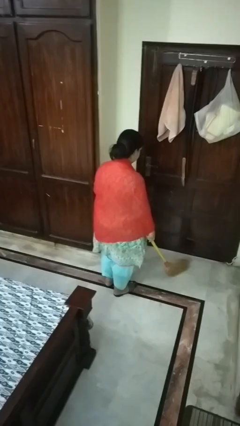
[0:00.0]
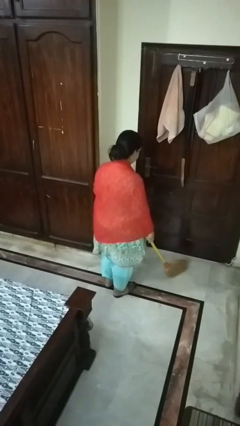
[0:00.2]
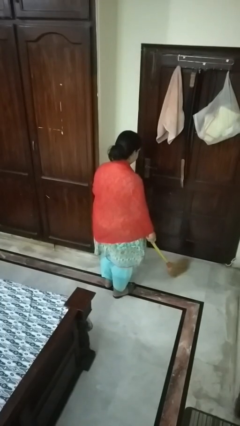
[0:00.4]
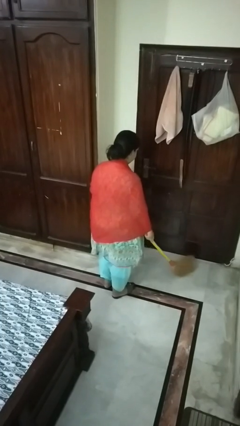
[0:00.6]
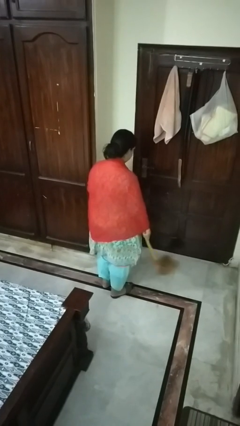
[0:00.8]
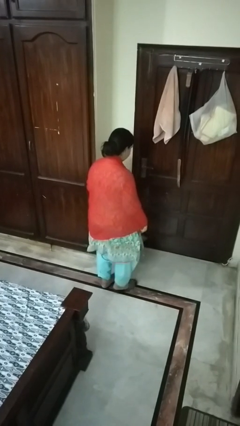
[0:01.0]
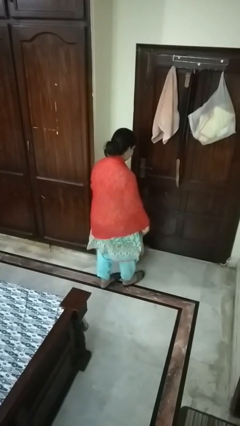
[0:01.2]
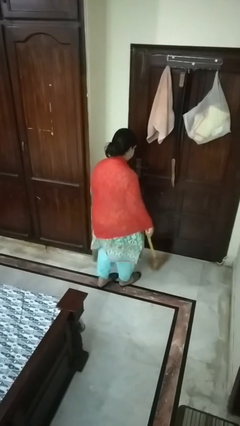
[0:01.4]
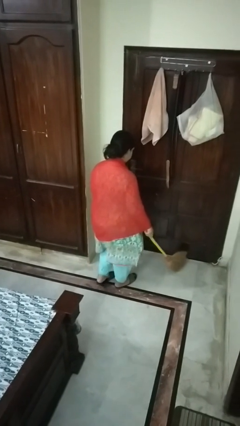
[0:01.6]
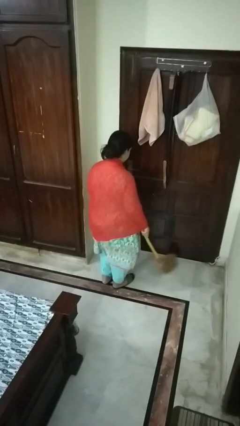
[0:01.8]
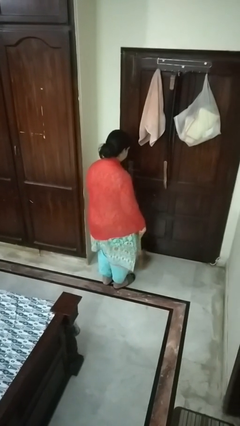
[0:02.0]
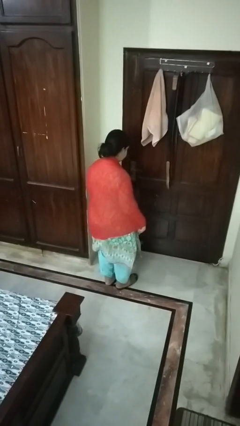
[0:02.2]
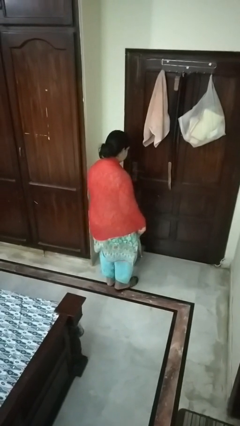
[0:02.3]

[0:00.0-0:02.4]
person sweeps floor

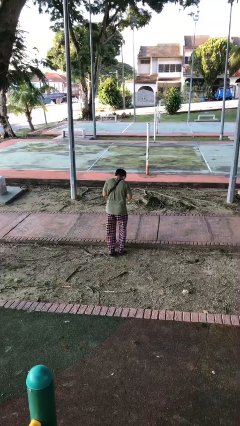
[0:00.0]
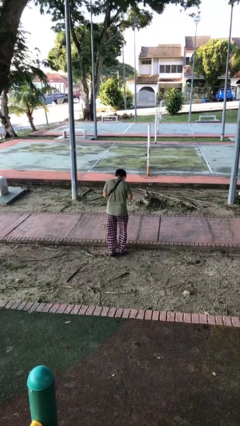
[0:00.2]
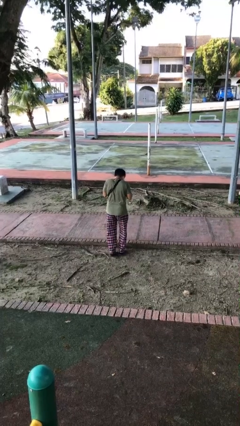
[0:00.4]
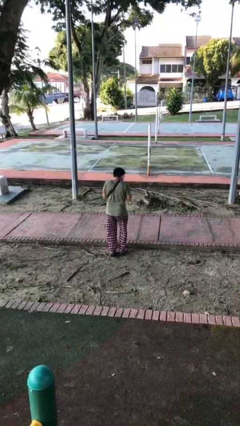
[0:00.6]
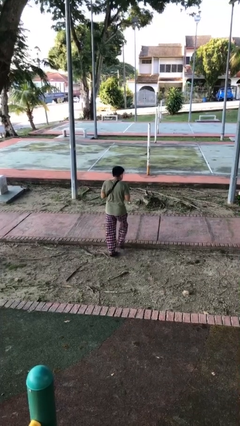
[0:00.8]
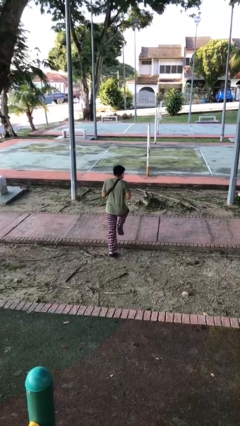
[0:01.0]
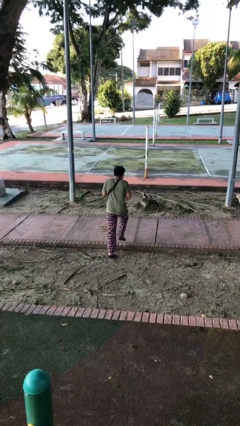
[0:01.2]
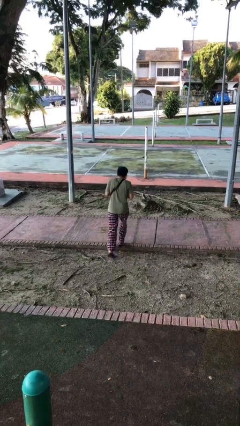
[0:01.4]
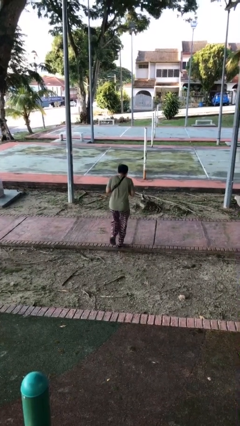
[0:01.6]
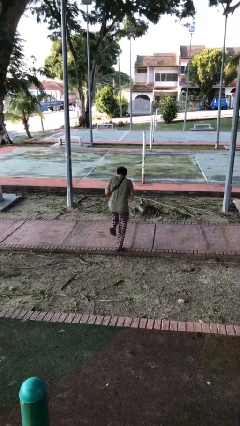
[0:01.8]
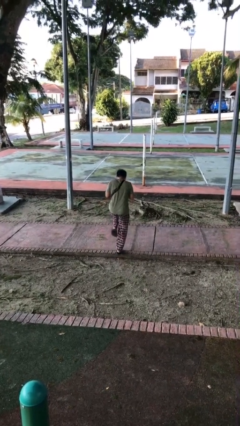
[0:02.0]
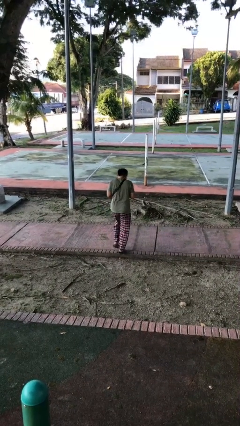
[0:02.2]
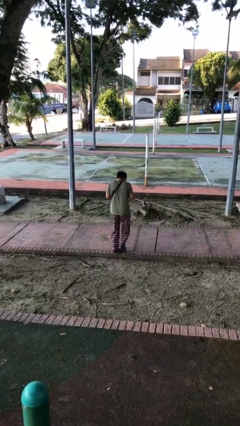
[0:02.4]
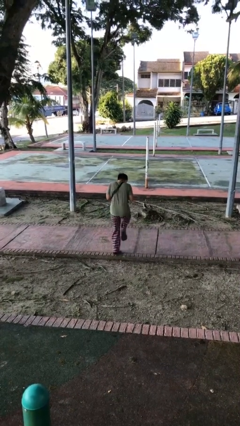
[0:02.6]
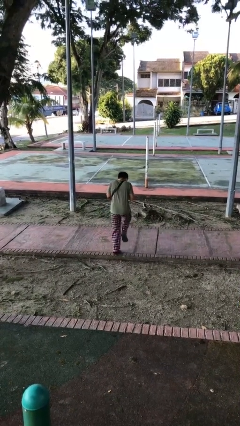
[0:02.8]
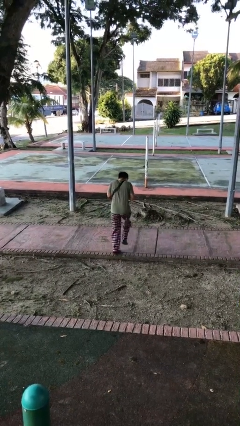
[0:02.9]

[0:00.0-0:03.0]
person walks tiptoe

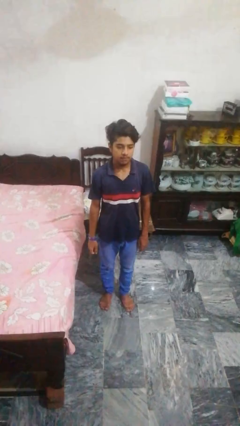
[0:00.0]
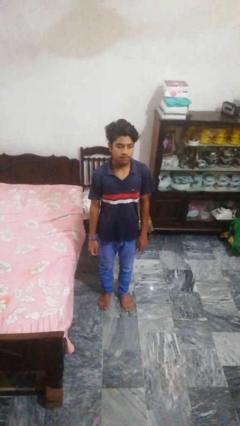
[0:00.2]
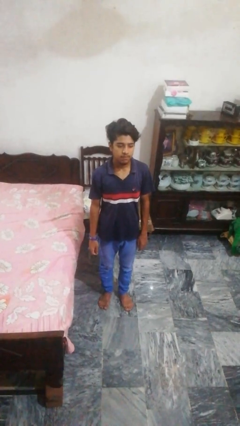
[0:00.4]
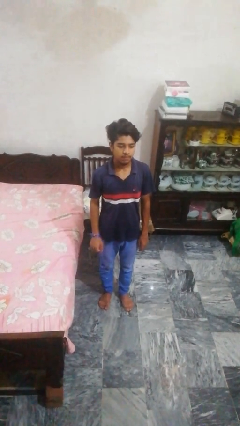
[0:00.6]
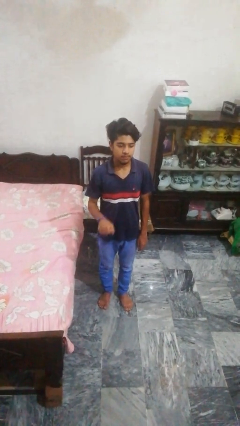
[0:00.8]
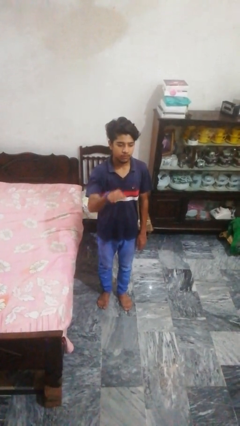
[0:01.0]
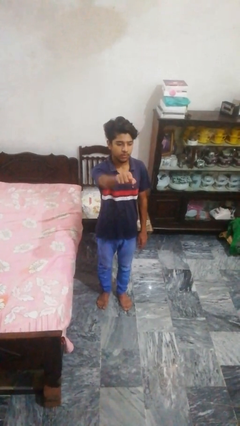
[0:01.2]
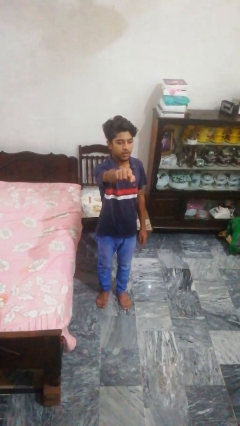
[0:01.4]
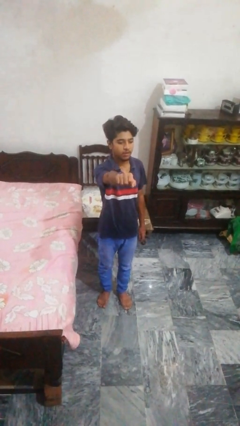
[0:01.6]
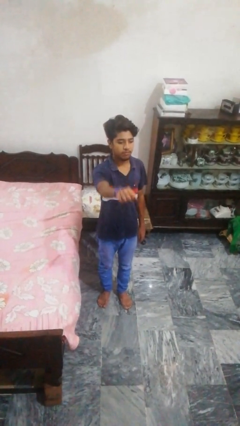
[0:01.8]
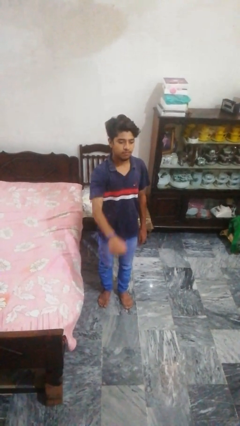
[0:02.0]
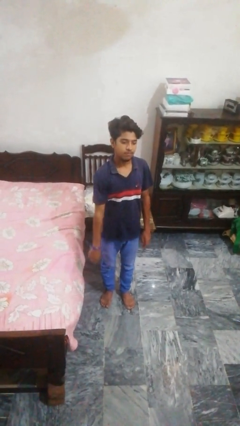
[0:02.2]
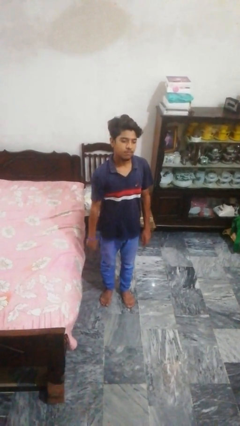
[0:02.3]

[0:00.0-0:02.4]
person punches

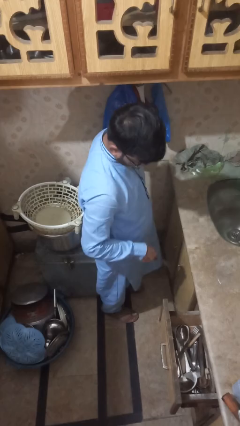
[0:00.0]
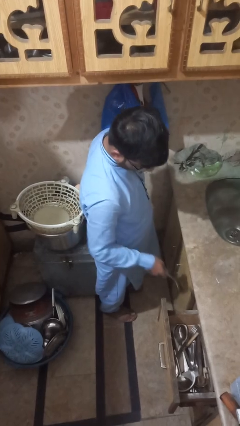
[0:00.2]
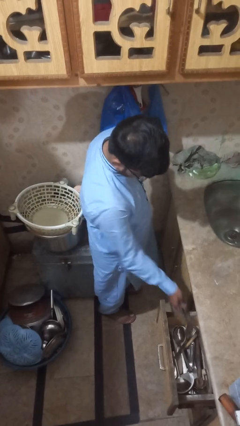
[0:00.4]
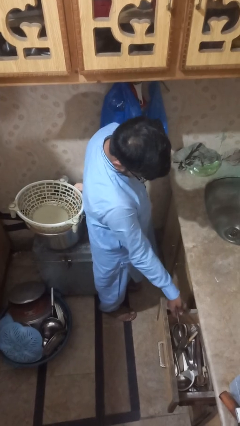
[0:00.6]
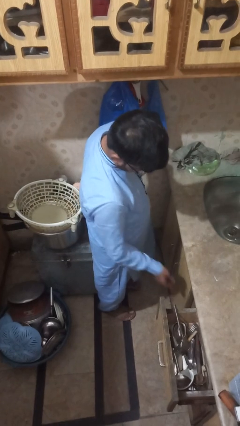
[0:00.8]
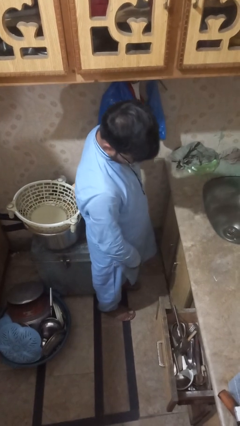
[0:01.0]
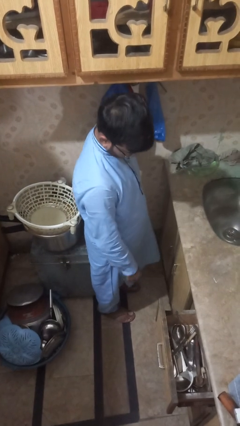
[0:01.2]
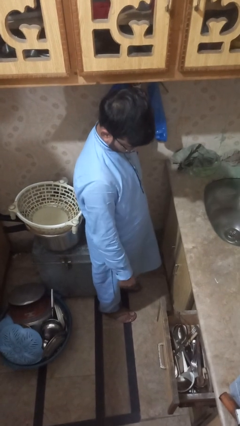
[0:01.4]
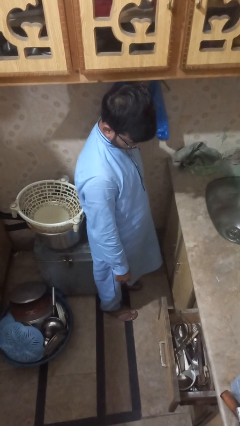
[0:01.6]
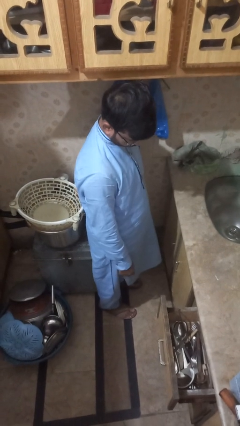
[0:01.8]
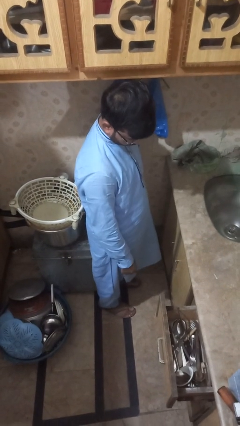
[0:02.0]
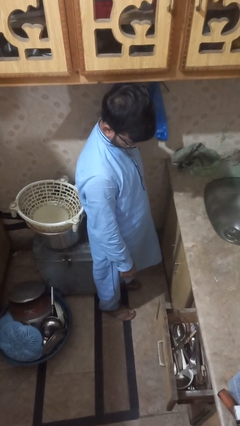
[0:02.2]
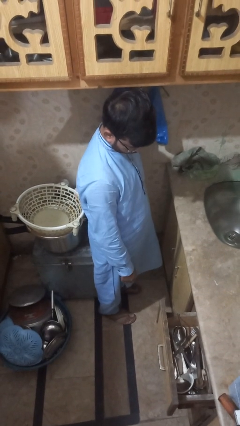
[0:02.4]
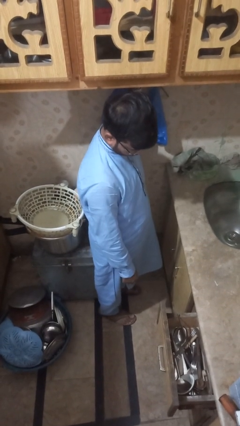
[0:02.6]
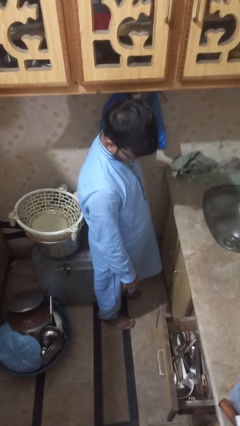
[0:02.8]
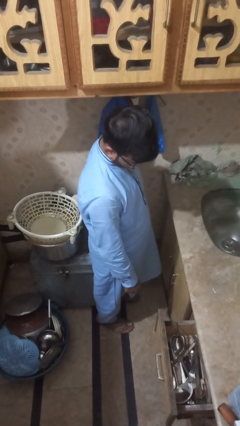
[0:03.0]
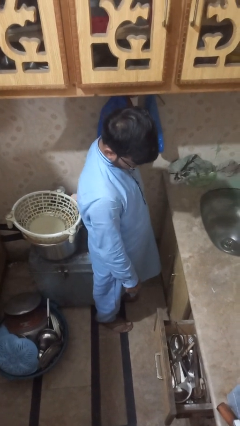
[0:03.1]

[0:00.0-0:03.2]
person puts object into kitchen drawer

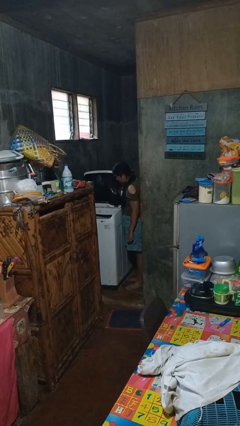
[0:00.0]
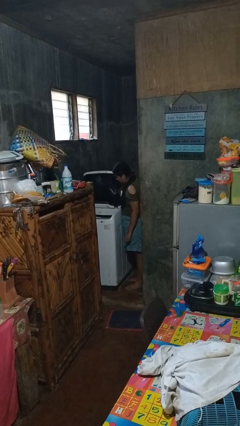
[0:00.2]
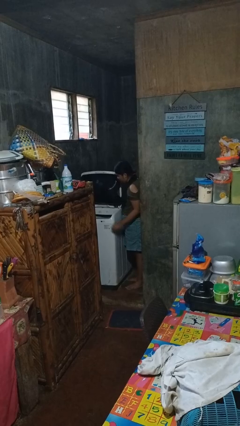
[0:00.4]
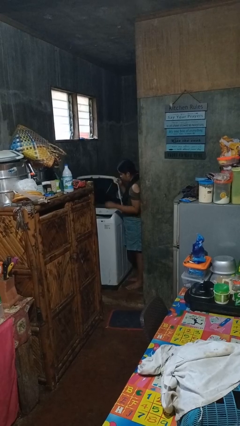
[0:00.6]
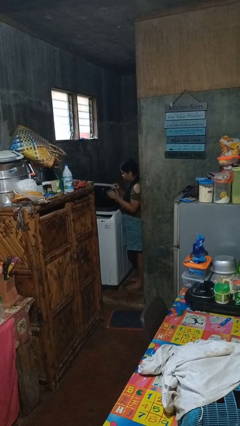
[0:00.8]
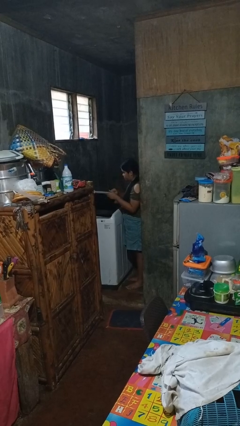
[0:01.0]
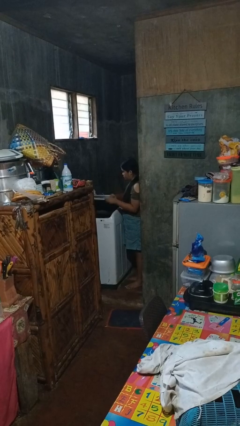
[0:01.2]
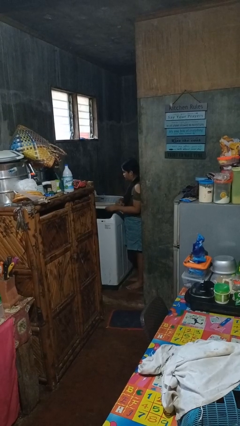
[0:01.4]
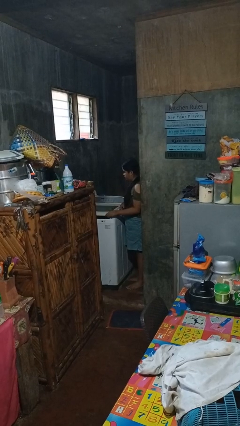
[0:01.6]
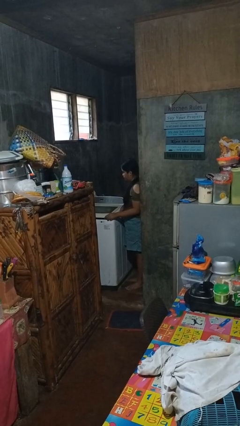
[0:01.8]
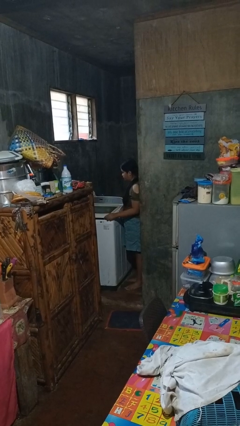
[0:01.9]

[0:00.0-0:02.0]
person closes clothes washer

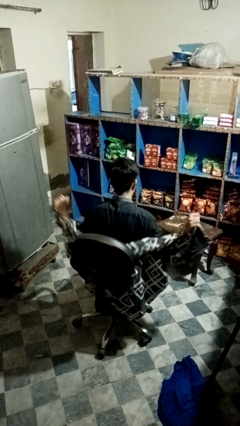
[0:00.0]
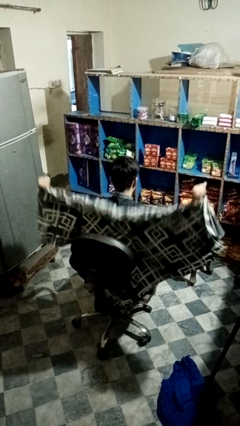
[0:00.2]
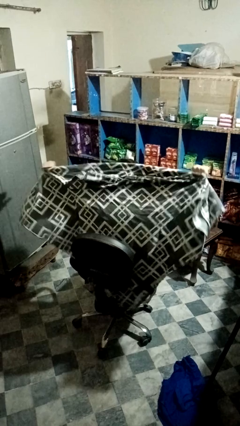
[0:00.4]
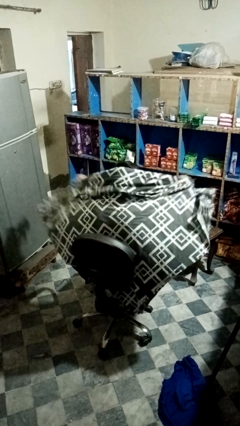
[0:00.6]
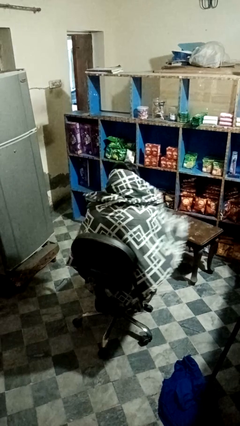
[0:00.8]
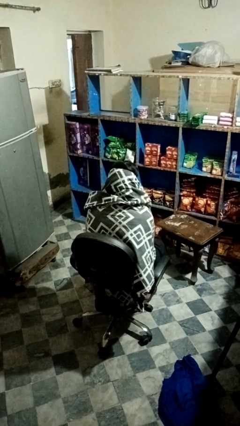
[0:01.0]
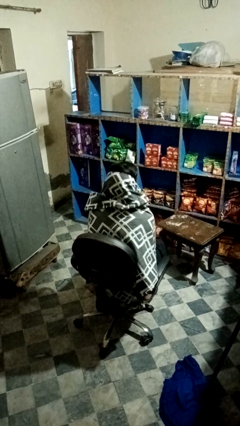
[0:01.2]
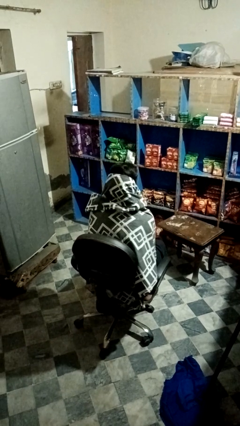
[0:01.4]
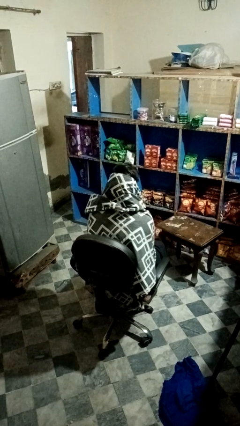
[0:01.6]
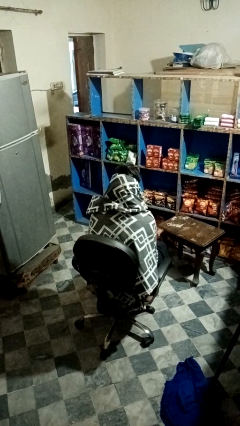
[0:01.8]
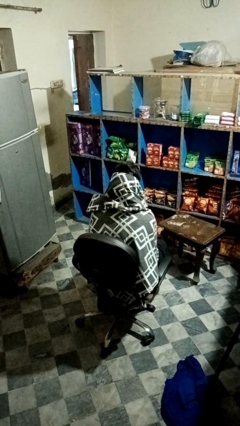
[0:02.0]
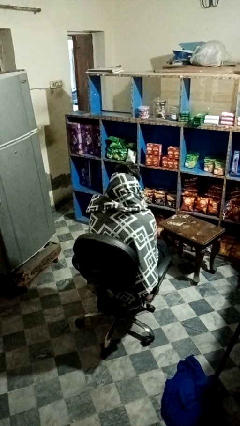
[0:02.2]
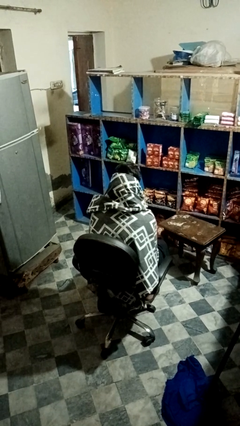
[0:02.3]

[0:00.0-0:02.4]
person covers with blanket

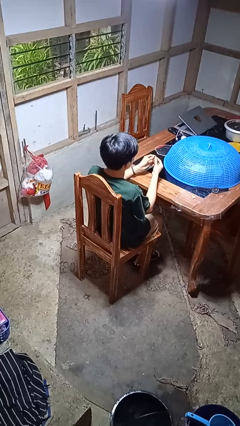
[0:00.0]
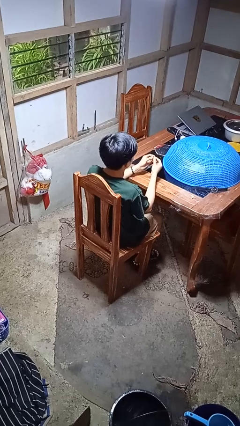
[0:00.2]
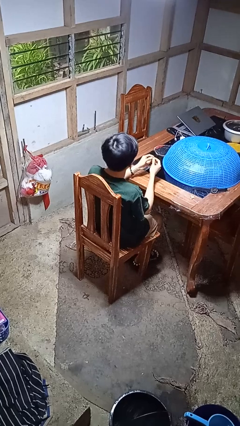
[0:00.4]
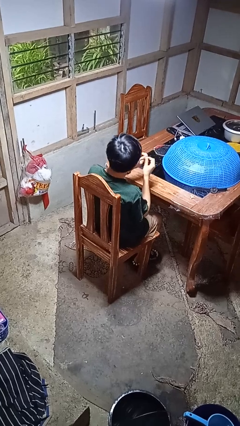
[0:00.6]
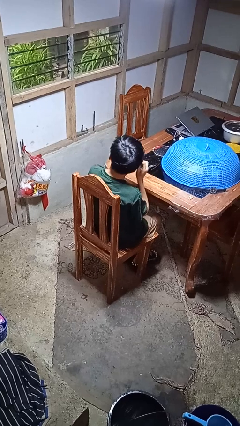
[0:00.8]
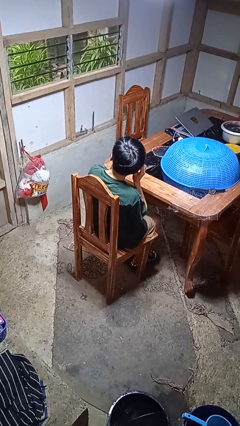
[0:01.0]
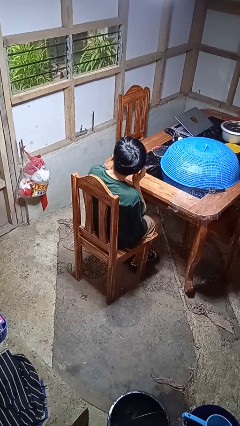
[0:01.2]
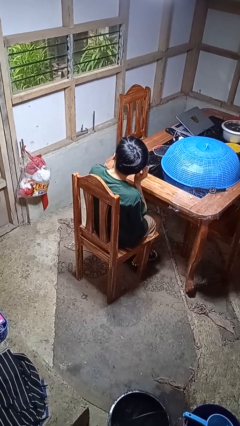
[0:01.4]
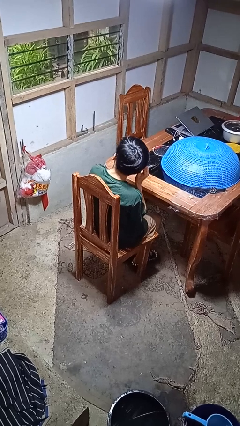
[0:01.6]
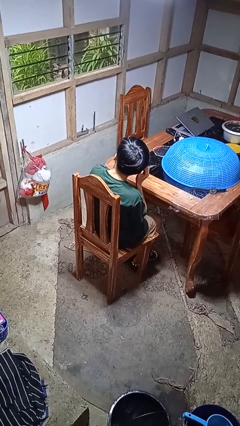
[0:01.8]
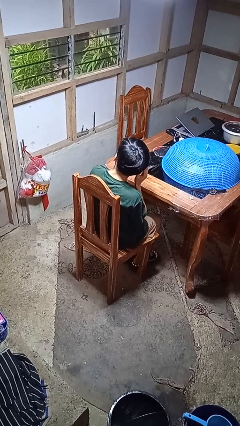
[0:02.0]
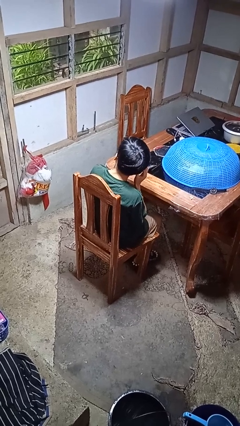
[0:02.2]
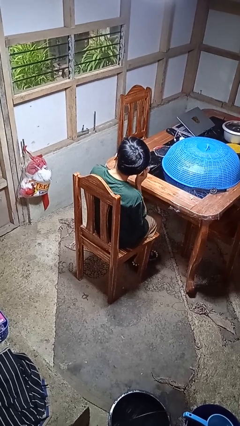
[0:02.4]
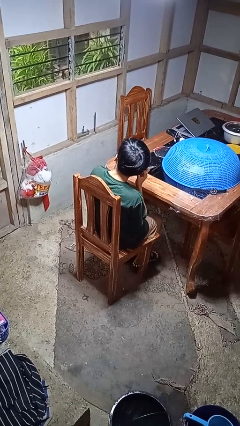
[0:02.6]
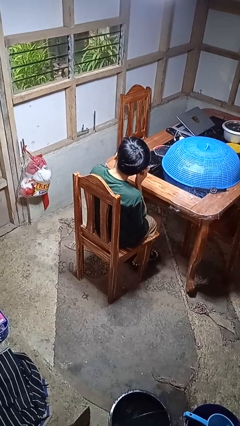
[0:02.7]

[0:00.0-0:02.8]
person puts on earrings
